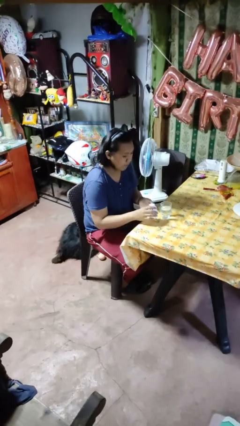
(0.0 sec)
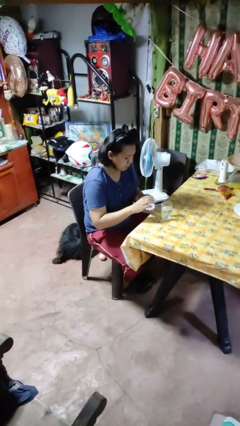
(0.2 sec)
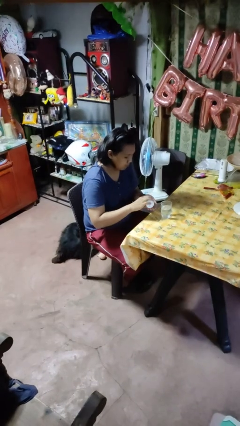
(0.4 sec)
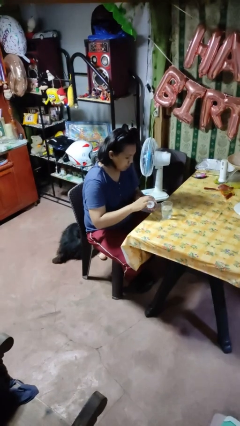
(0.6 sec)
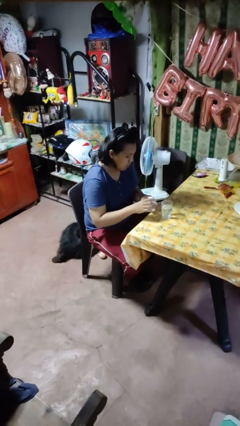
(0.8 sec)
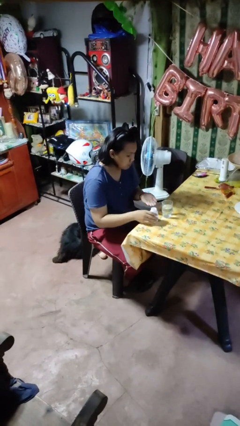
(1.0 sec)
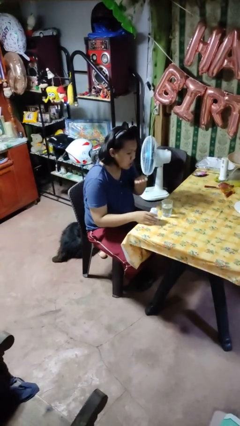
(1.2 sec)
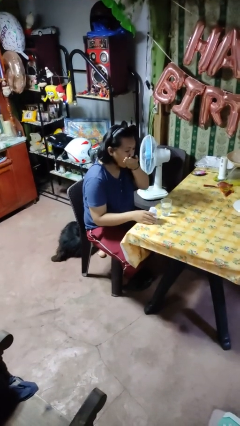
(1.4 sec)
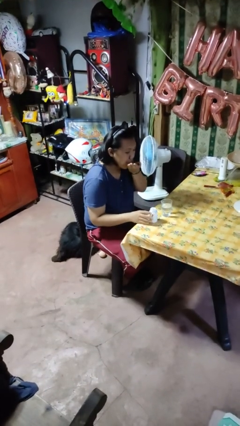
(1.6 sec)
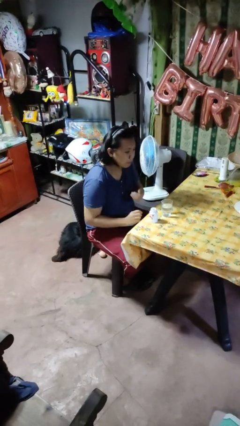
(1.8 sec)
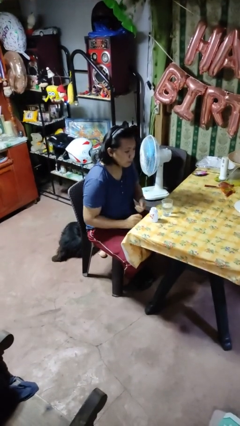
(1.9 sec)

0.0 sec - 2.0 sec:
person takes medicine pills

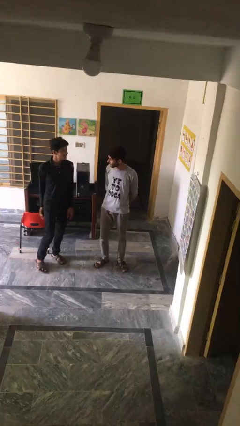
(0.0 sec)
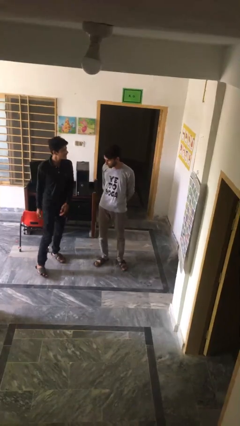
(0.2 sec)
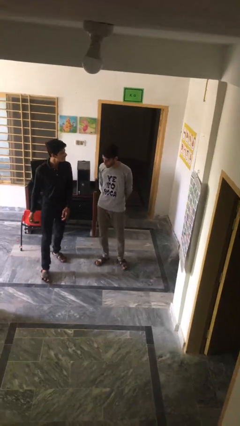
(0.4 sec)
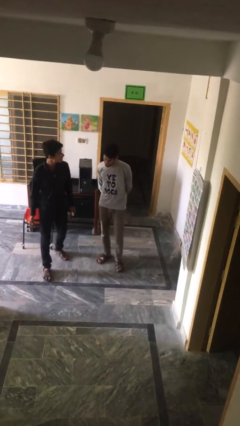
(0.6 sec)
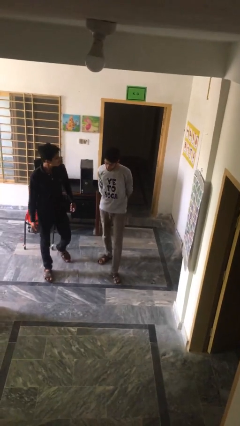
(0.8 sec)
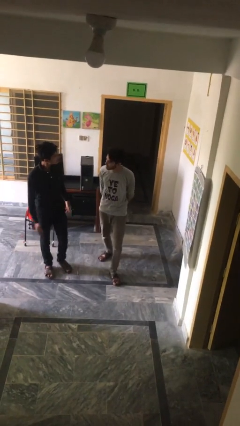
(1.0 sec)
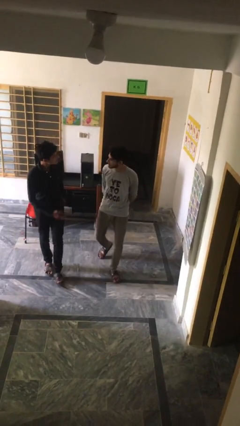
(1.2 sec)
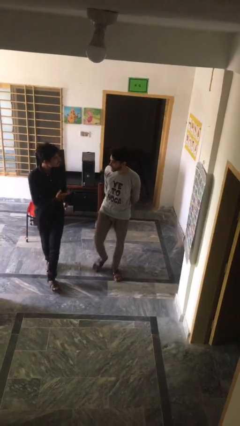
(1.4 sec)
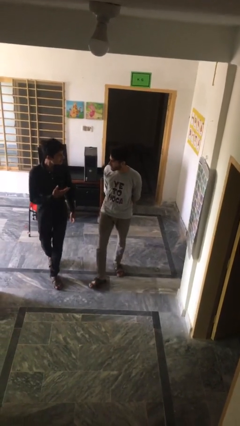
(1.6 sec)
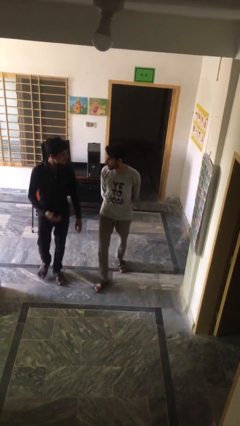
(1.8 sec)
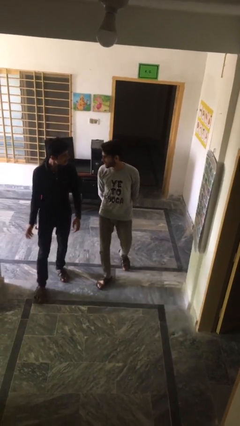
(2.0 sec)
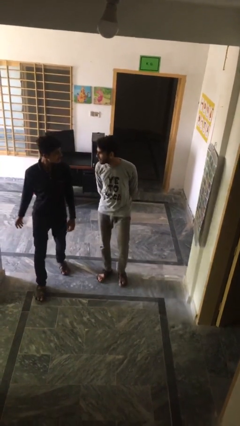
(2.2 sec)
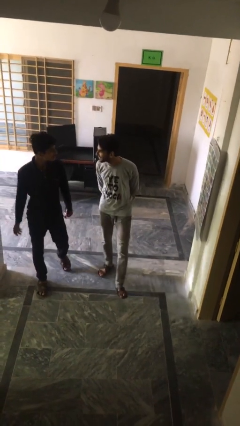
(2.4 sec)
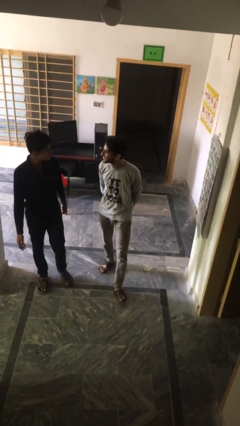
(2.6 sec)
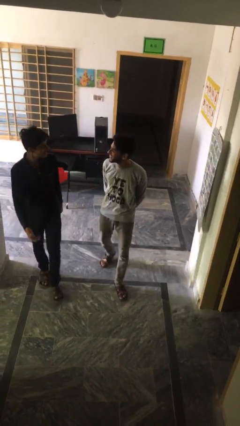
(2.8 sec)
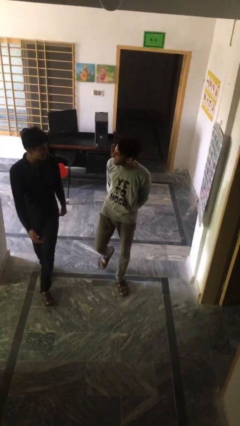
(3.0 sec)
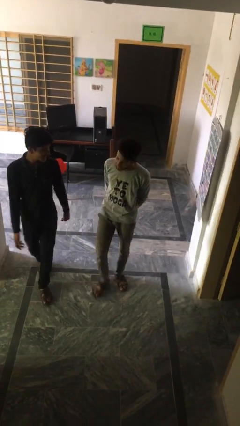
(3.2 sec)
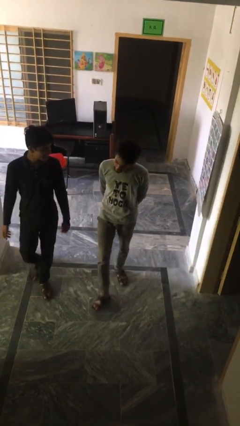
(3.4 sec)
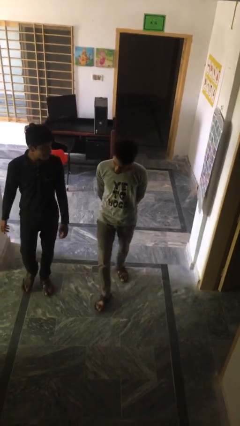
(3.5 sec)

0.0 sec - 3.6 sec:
person talks to person

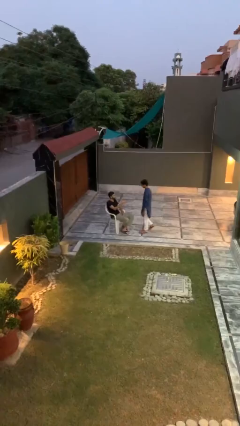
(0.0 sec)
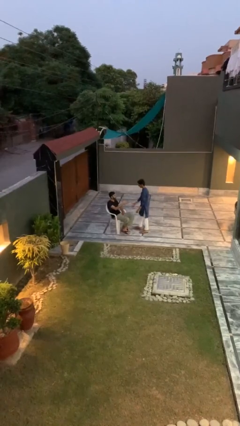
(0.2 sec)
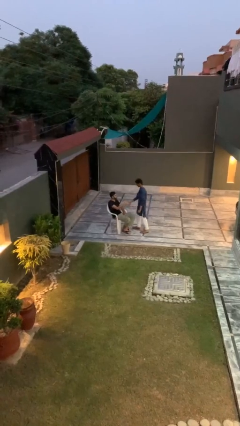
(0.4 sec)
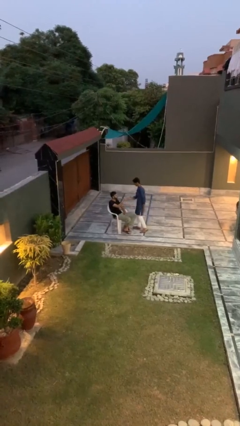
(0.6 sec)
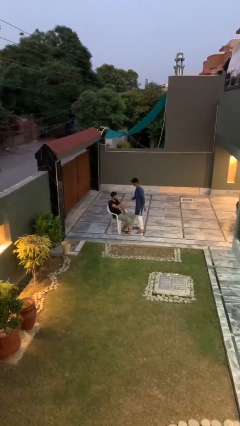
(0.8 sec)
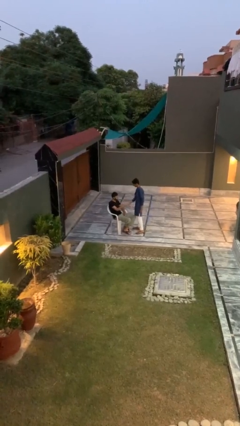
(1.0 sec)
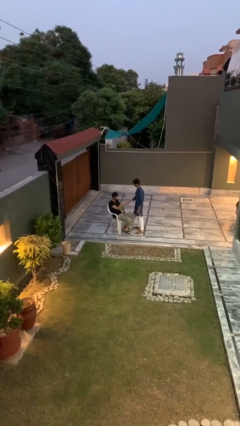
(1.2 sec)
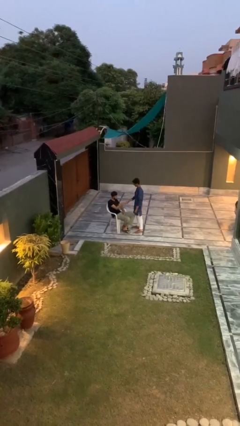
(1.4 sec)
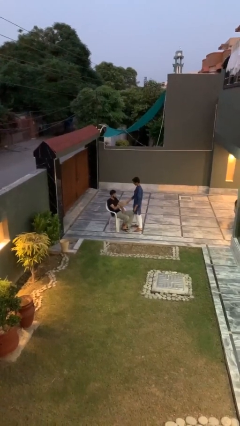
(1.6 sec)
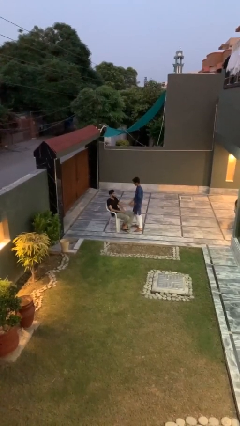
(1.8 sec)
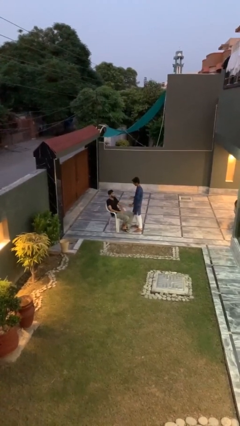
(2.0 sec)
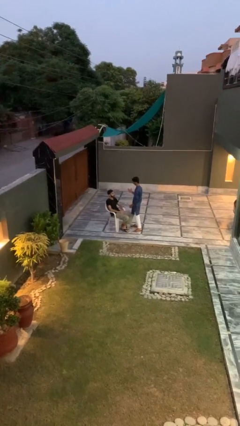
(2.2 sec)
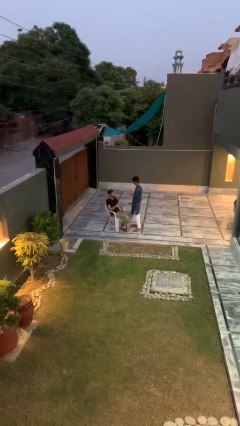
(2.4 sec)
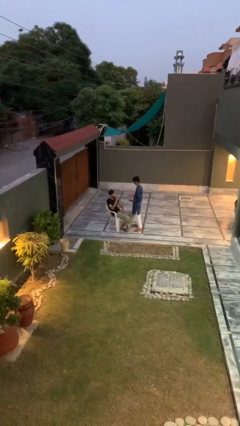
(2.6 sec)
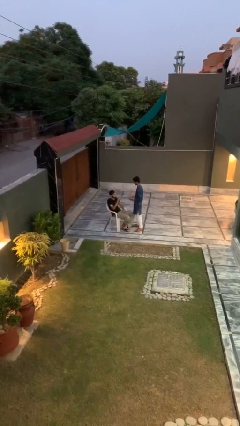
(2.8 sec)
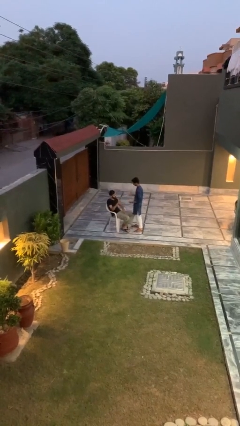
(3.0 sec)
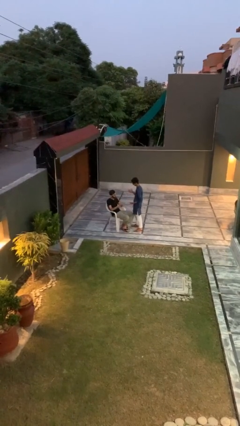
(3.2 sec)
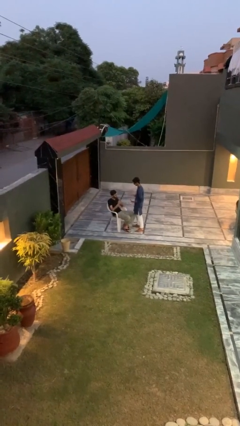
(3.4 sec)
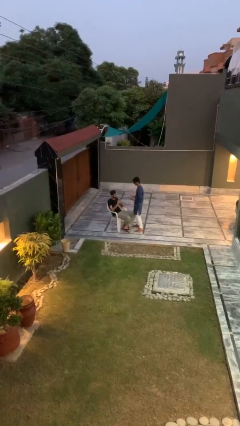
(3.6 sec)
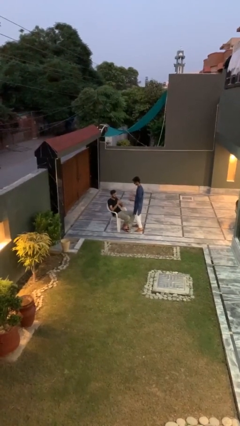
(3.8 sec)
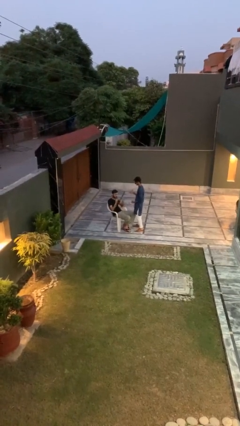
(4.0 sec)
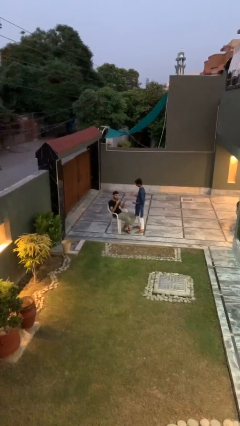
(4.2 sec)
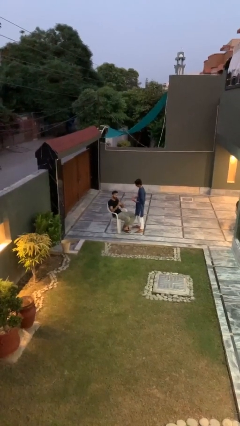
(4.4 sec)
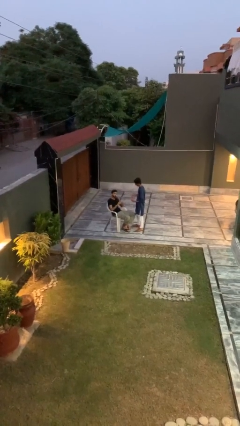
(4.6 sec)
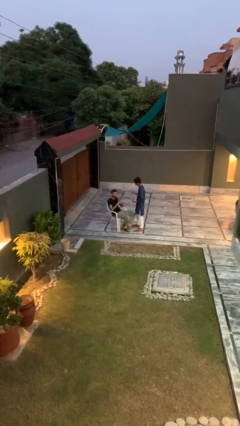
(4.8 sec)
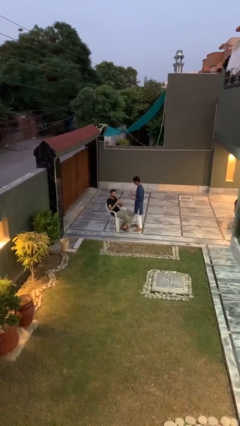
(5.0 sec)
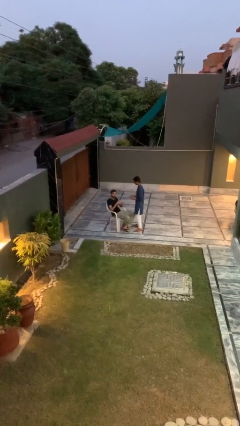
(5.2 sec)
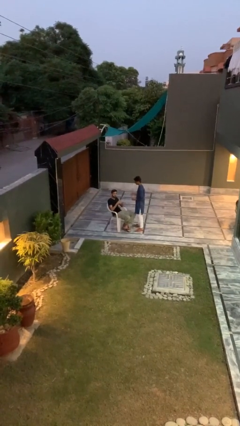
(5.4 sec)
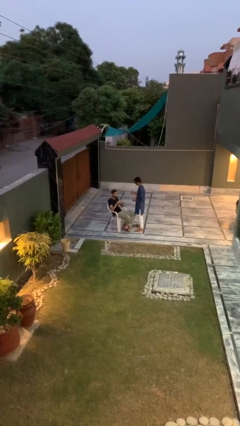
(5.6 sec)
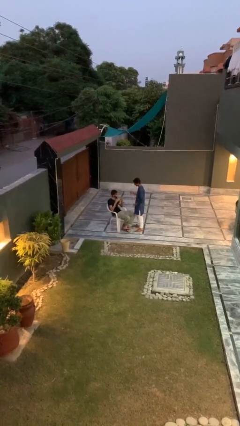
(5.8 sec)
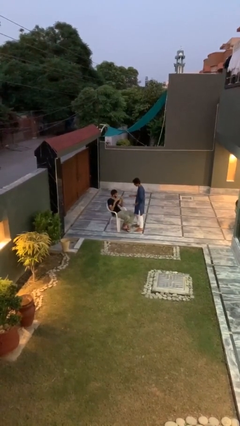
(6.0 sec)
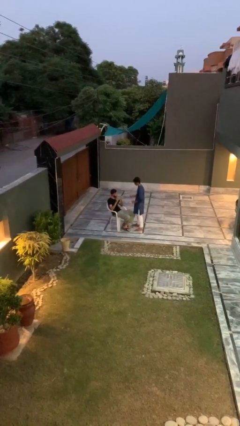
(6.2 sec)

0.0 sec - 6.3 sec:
person shakes hand

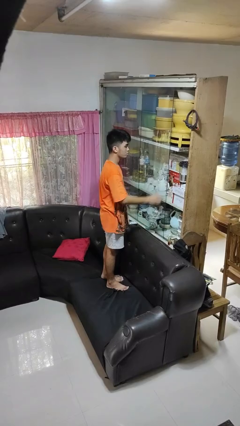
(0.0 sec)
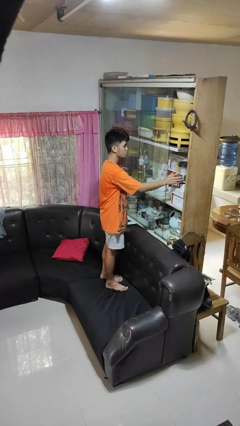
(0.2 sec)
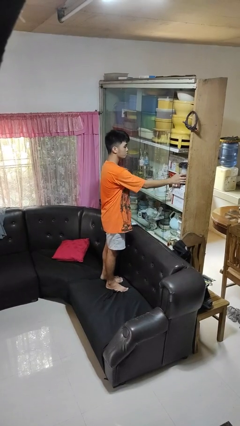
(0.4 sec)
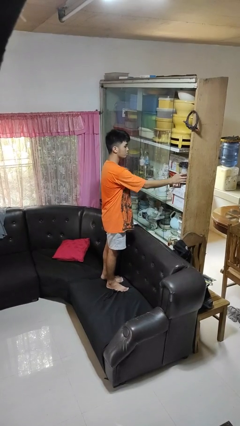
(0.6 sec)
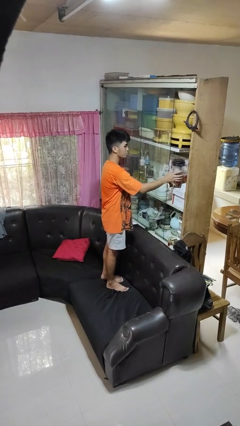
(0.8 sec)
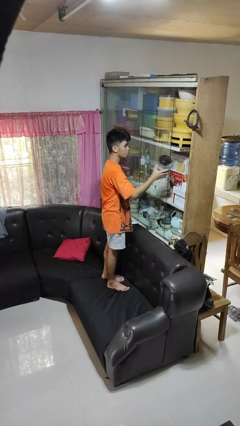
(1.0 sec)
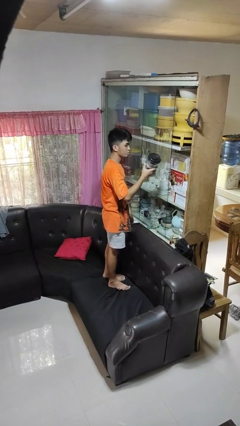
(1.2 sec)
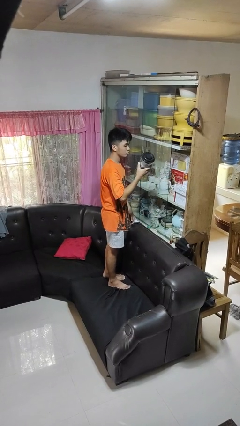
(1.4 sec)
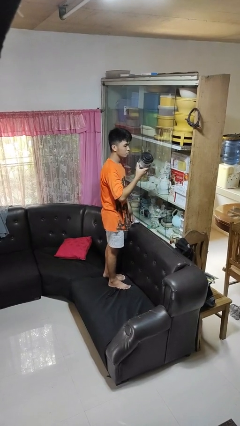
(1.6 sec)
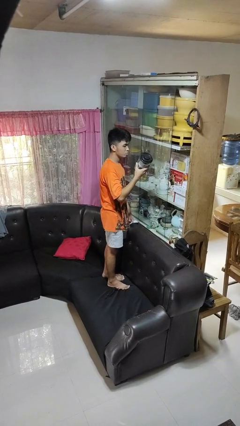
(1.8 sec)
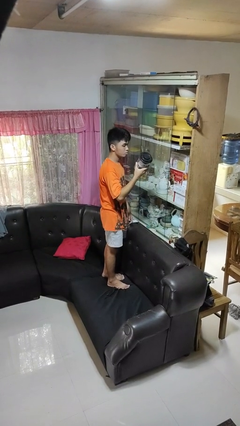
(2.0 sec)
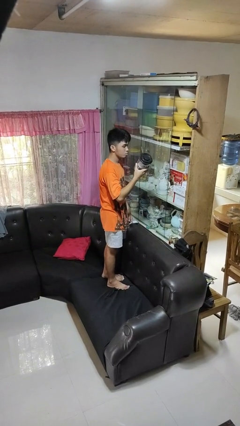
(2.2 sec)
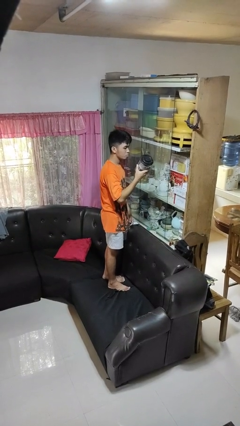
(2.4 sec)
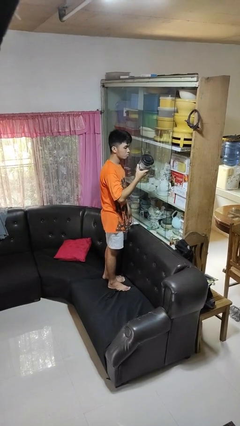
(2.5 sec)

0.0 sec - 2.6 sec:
person picks up object from cabinet

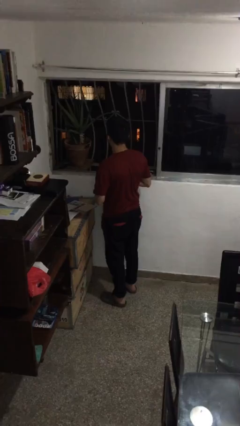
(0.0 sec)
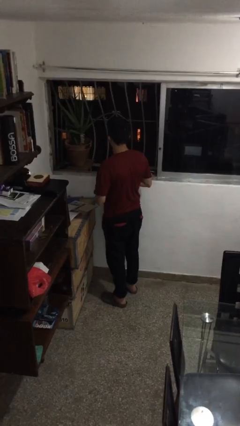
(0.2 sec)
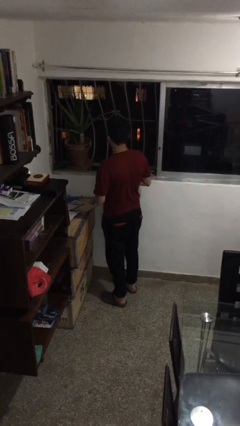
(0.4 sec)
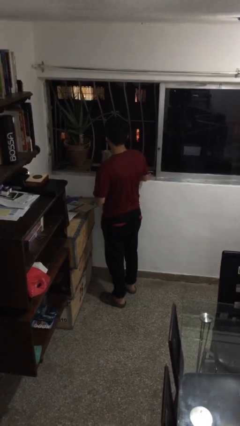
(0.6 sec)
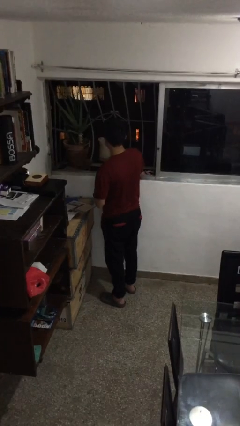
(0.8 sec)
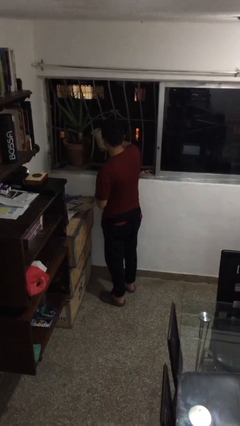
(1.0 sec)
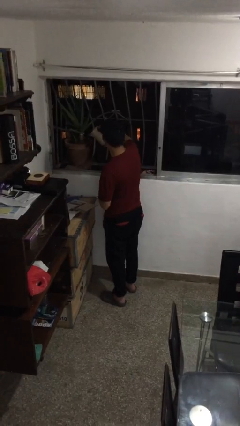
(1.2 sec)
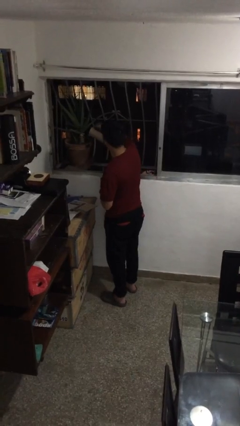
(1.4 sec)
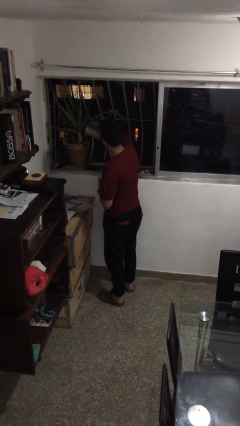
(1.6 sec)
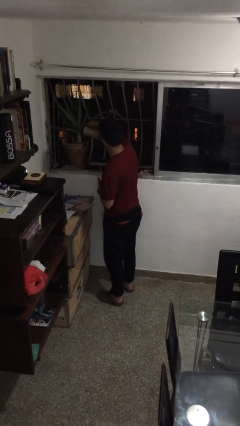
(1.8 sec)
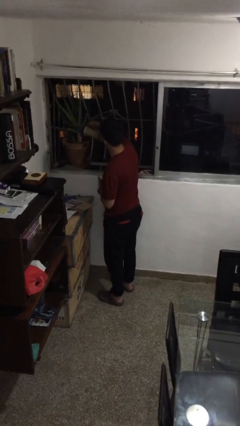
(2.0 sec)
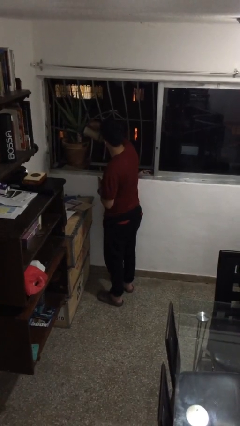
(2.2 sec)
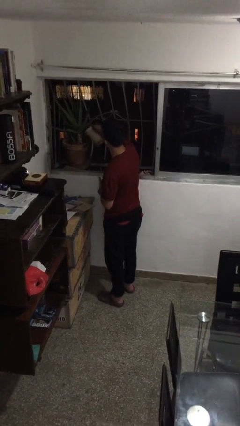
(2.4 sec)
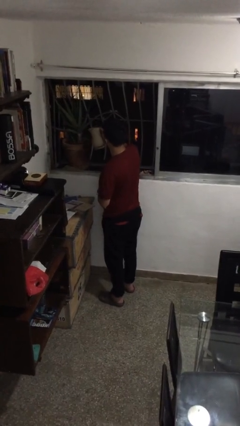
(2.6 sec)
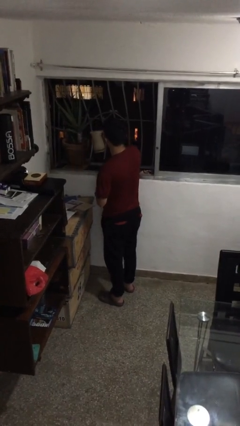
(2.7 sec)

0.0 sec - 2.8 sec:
person waters houseplant

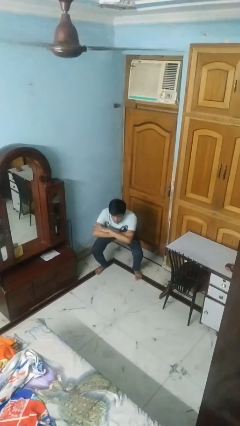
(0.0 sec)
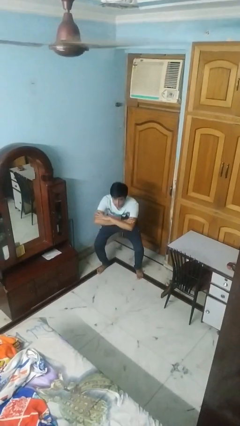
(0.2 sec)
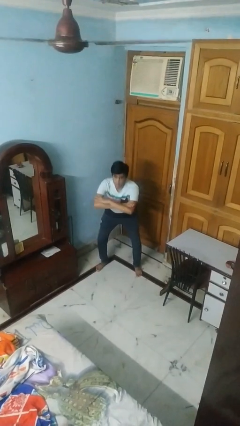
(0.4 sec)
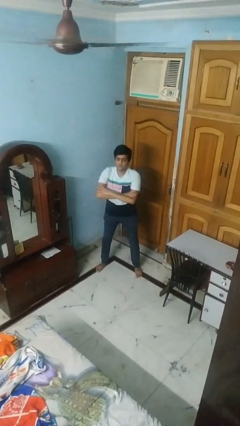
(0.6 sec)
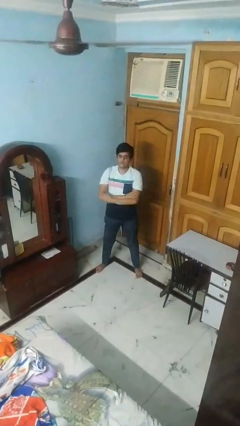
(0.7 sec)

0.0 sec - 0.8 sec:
person stands up
